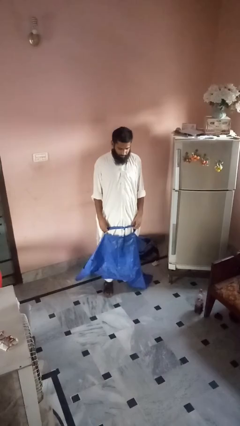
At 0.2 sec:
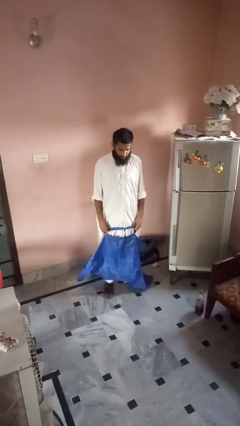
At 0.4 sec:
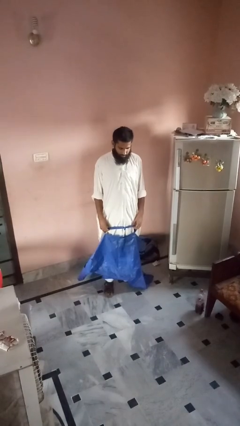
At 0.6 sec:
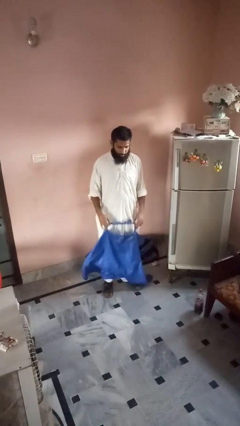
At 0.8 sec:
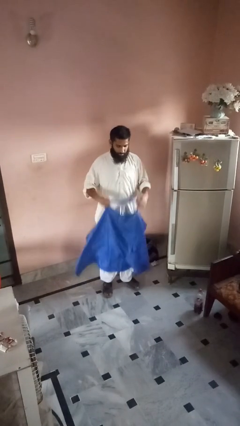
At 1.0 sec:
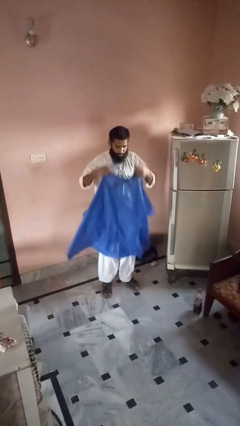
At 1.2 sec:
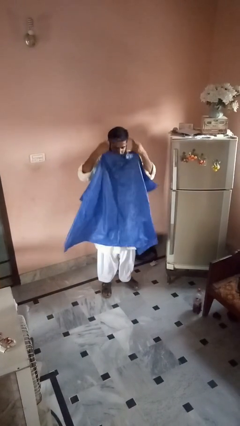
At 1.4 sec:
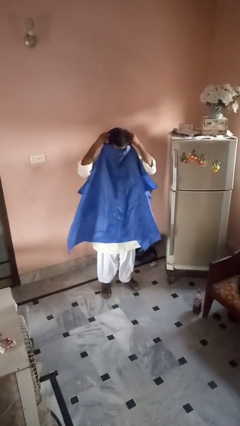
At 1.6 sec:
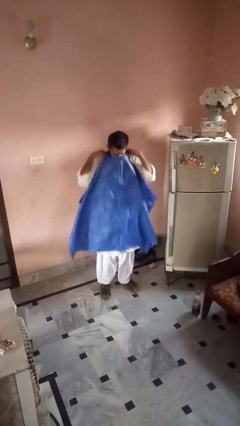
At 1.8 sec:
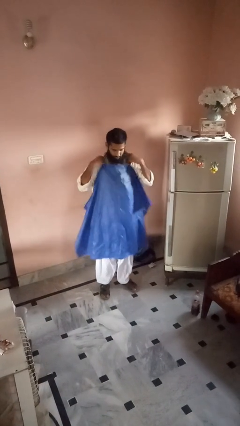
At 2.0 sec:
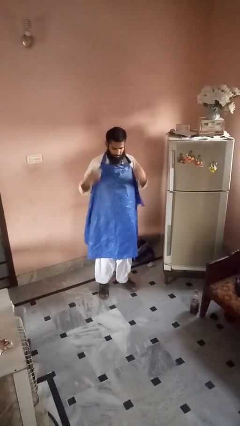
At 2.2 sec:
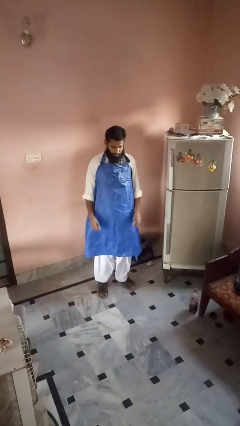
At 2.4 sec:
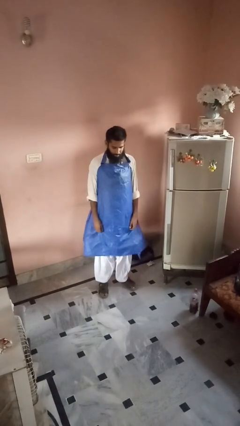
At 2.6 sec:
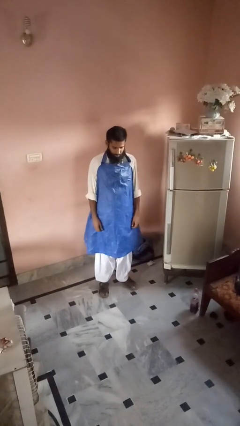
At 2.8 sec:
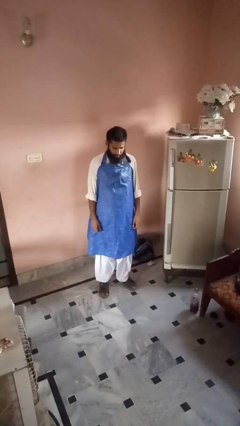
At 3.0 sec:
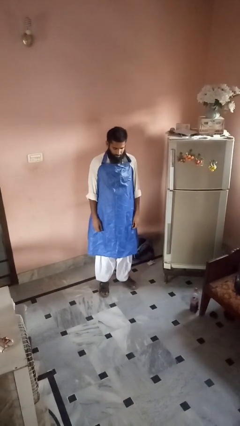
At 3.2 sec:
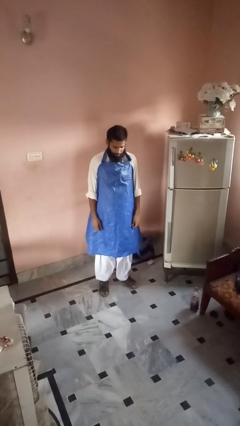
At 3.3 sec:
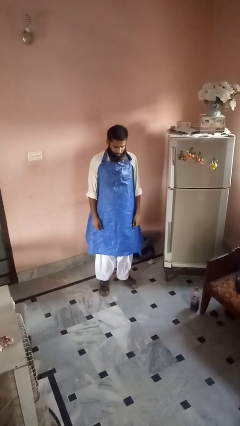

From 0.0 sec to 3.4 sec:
person puts on apron

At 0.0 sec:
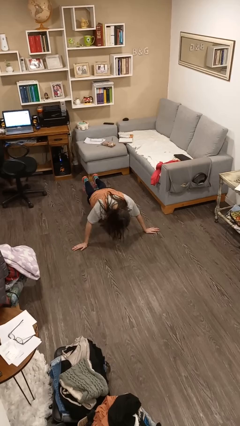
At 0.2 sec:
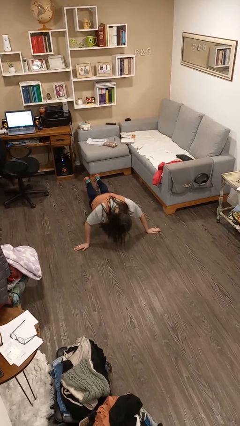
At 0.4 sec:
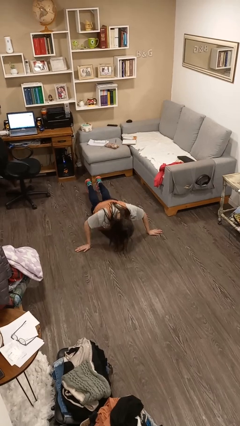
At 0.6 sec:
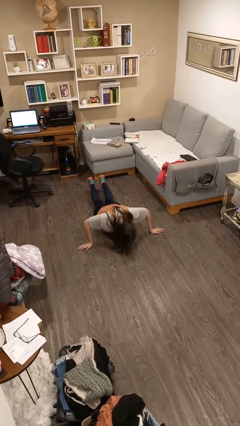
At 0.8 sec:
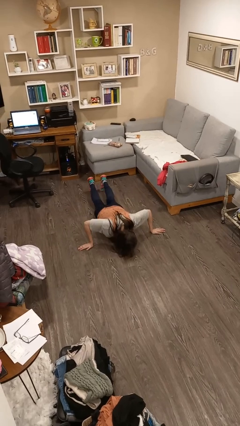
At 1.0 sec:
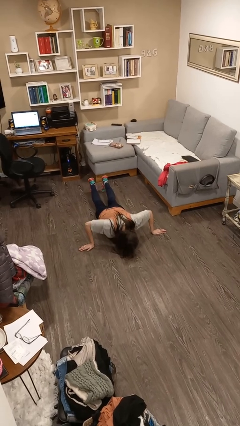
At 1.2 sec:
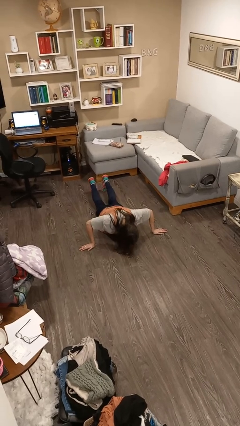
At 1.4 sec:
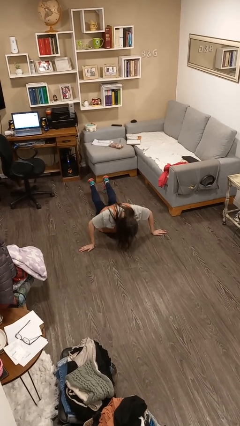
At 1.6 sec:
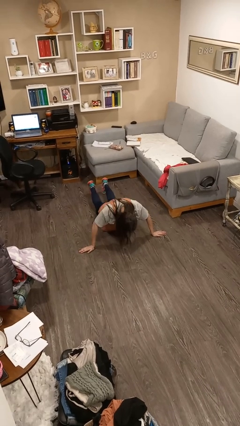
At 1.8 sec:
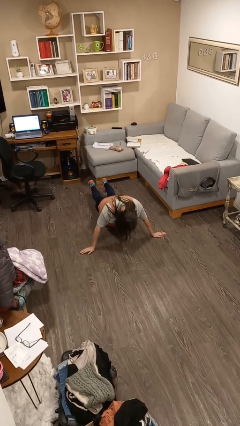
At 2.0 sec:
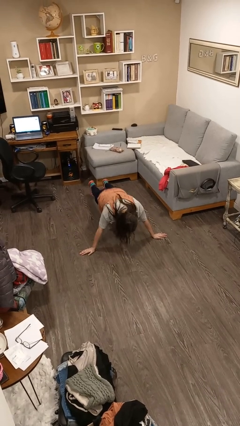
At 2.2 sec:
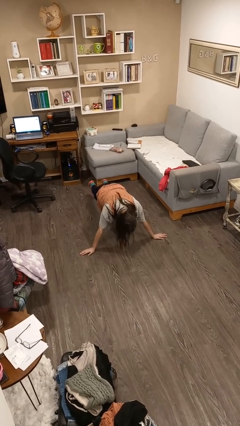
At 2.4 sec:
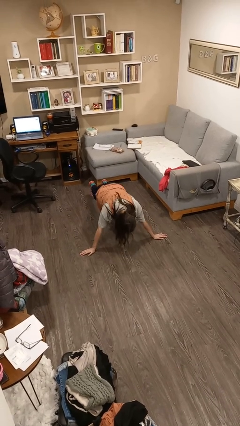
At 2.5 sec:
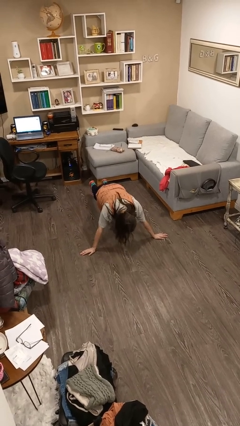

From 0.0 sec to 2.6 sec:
person exercises with pushup

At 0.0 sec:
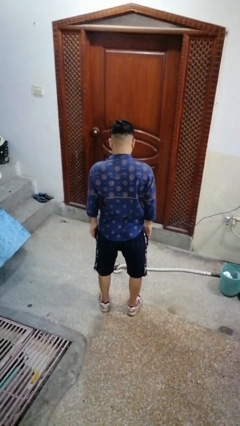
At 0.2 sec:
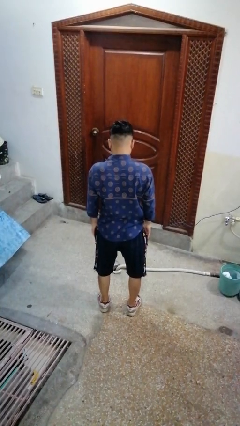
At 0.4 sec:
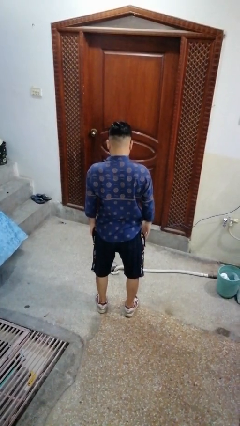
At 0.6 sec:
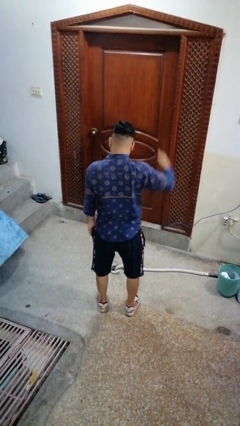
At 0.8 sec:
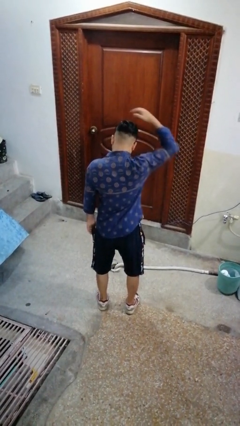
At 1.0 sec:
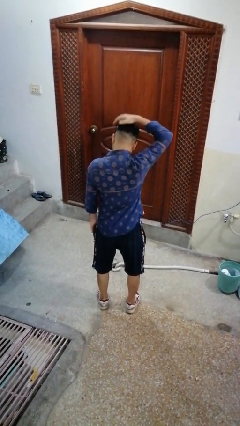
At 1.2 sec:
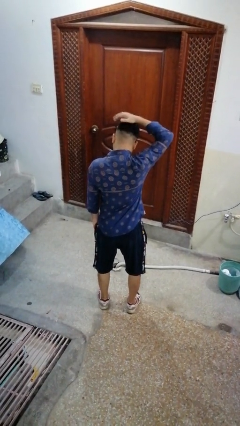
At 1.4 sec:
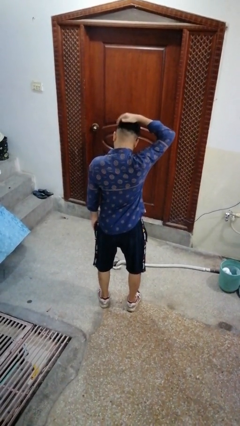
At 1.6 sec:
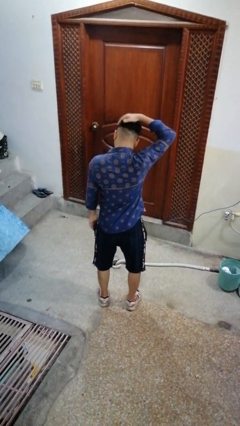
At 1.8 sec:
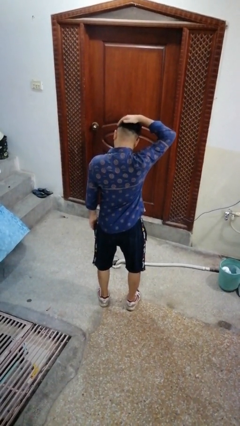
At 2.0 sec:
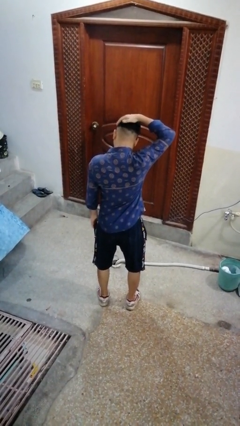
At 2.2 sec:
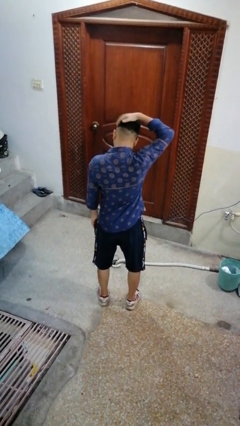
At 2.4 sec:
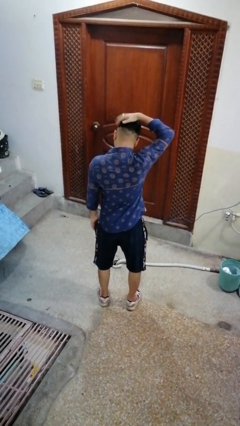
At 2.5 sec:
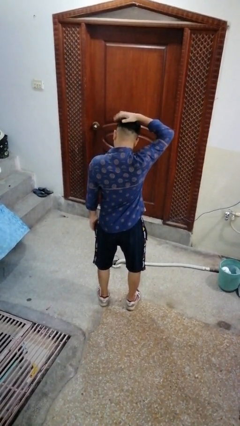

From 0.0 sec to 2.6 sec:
person pats head

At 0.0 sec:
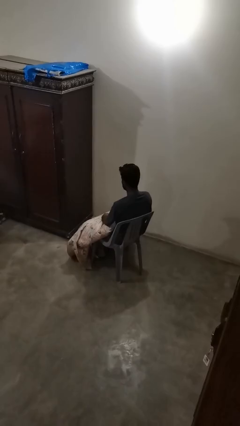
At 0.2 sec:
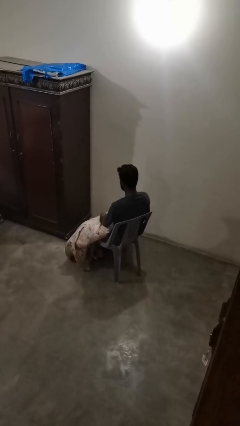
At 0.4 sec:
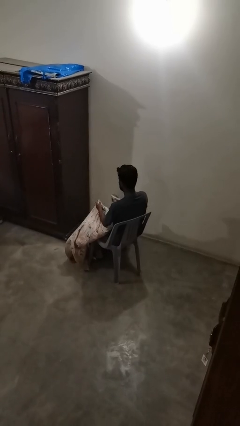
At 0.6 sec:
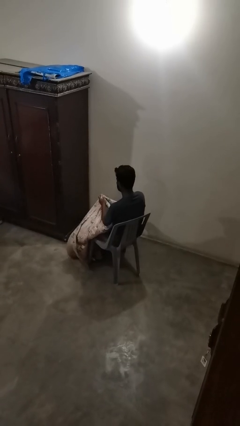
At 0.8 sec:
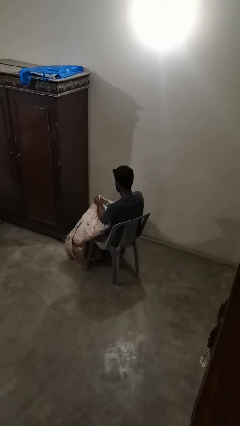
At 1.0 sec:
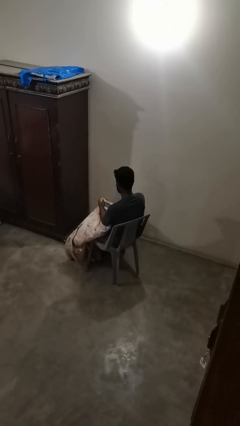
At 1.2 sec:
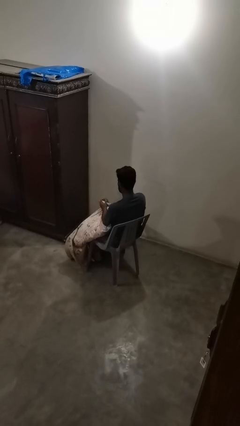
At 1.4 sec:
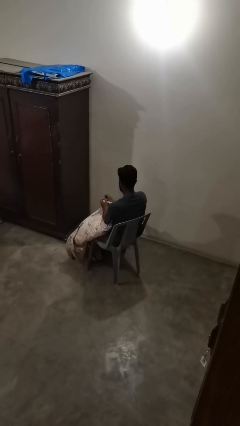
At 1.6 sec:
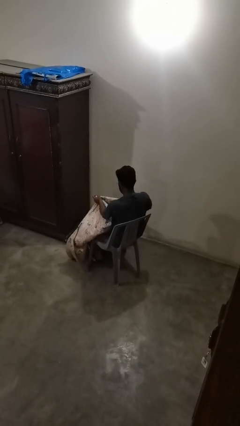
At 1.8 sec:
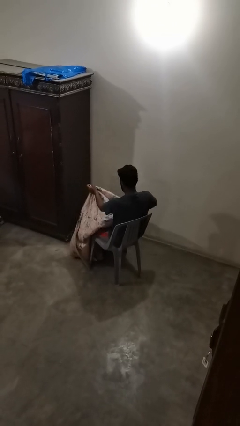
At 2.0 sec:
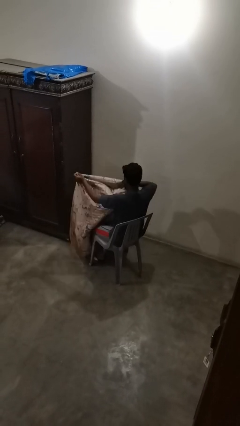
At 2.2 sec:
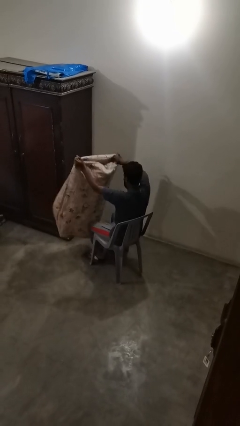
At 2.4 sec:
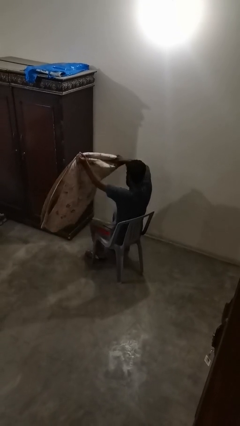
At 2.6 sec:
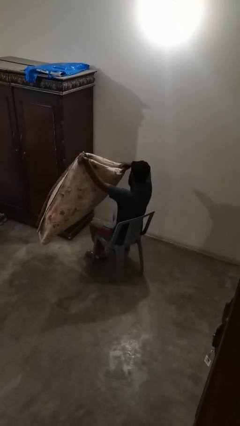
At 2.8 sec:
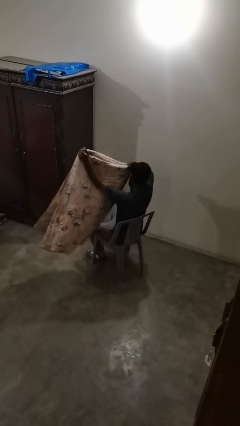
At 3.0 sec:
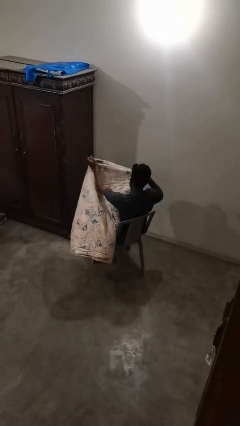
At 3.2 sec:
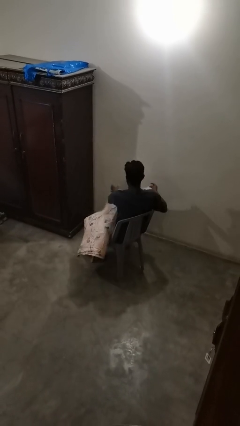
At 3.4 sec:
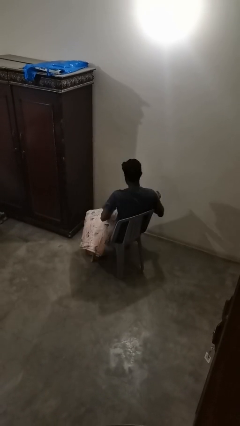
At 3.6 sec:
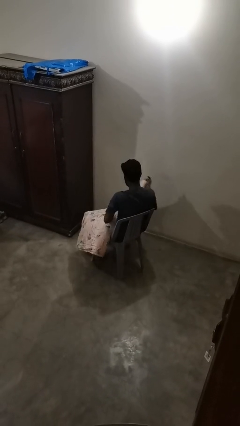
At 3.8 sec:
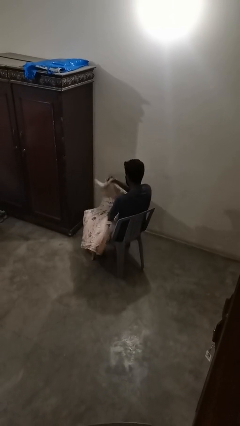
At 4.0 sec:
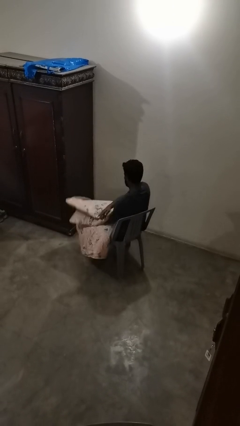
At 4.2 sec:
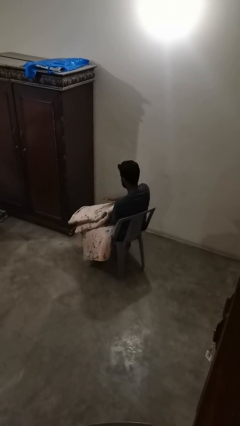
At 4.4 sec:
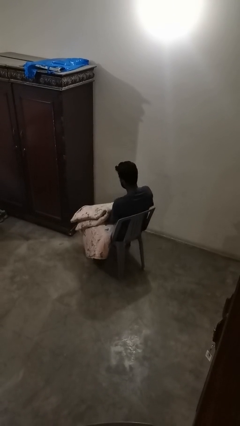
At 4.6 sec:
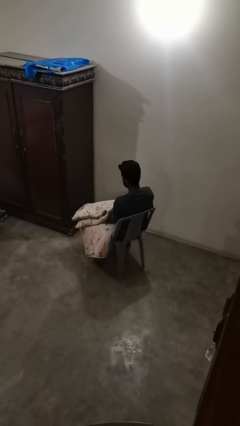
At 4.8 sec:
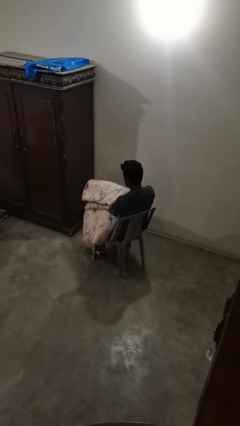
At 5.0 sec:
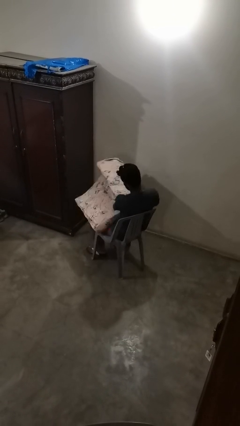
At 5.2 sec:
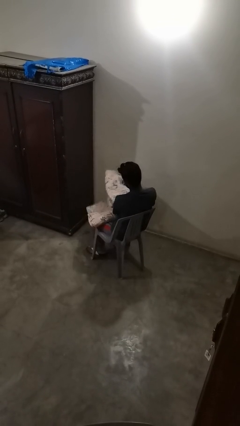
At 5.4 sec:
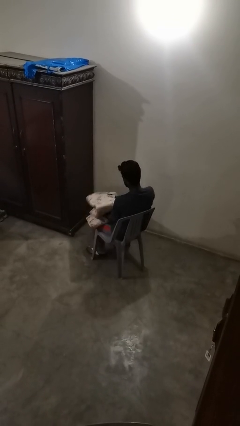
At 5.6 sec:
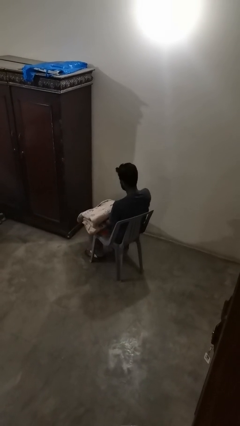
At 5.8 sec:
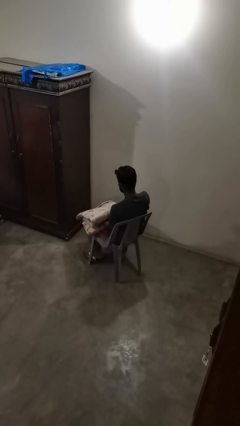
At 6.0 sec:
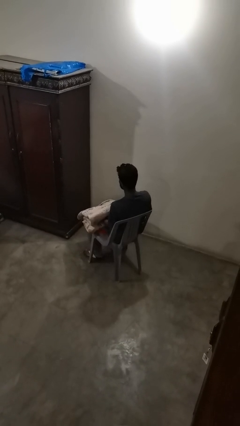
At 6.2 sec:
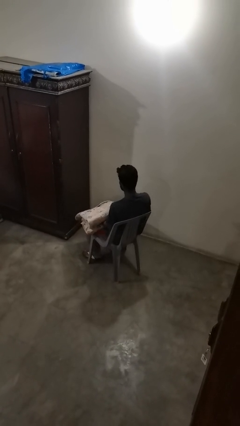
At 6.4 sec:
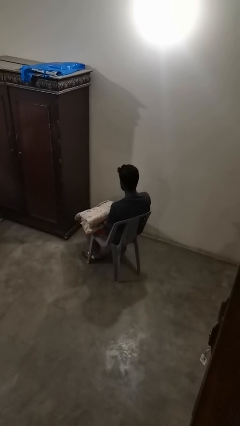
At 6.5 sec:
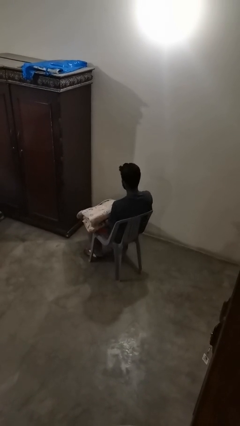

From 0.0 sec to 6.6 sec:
person folds blanket

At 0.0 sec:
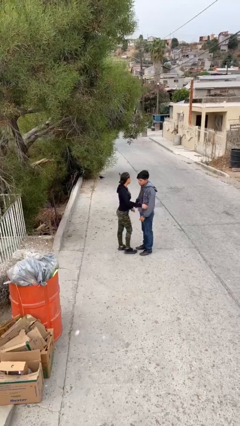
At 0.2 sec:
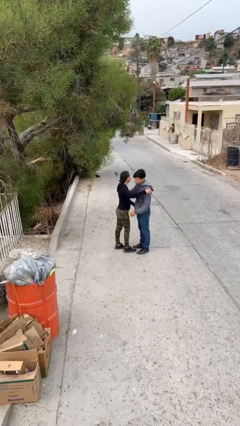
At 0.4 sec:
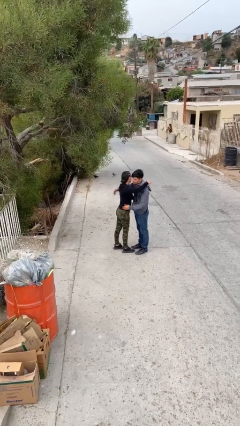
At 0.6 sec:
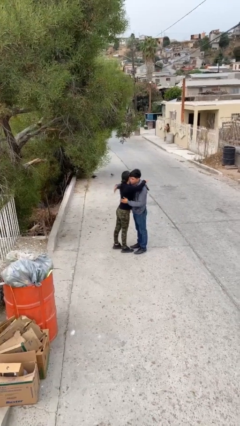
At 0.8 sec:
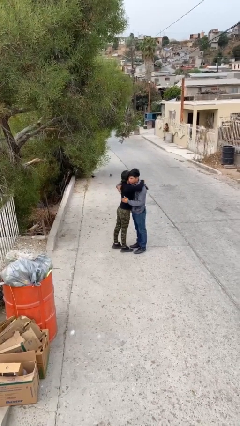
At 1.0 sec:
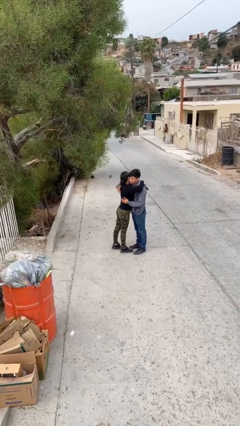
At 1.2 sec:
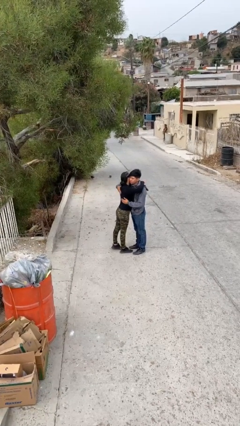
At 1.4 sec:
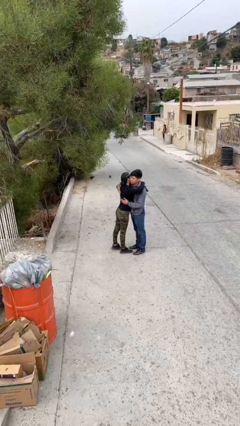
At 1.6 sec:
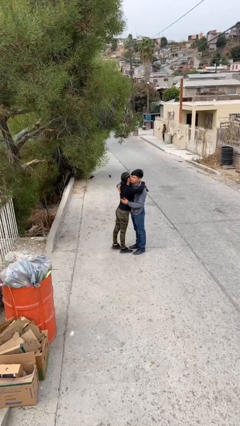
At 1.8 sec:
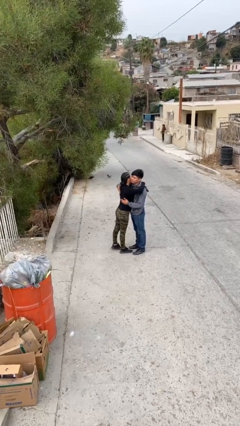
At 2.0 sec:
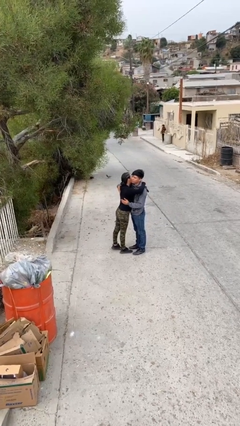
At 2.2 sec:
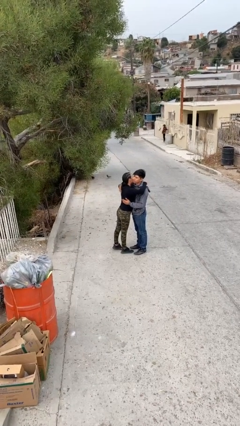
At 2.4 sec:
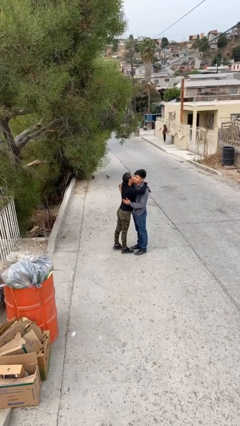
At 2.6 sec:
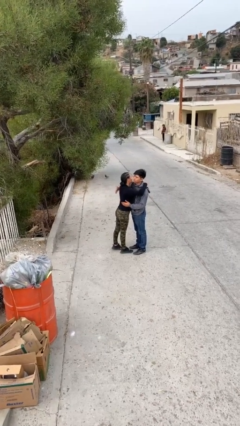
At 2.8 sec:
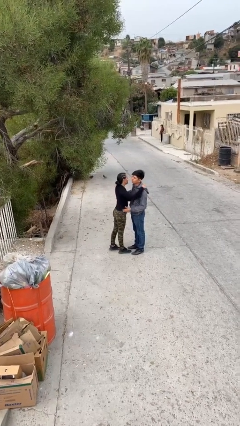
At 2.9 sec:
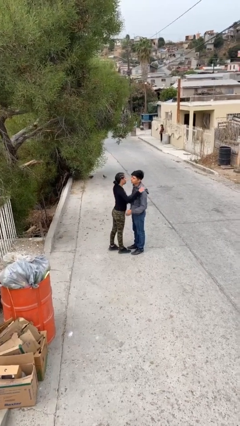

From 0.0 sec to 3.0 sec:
person embraces person
